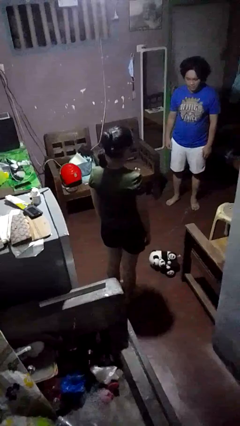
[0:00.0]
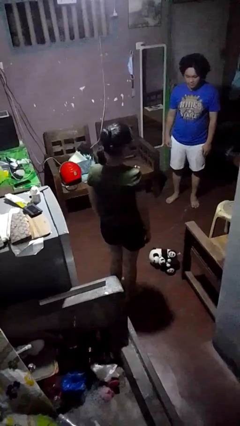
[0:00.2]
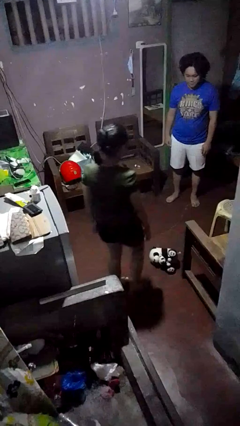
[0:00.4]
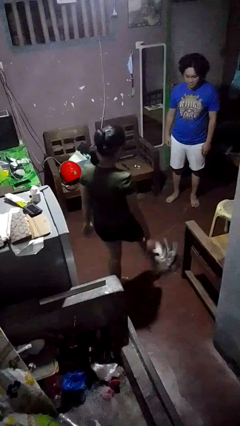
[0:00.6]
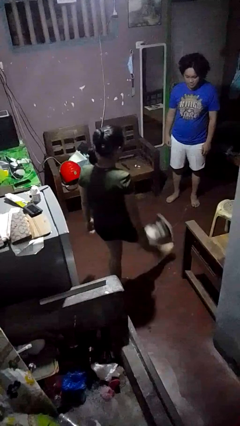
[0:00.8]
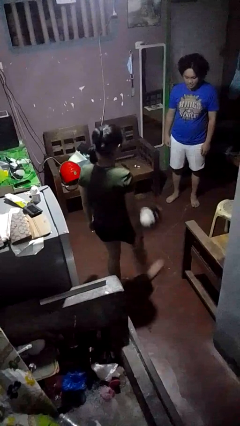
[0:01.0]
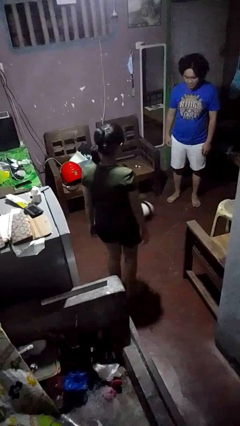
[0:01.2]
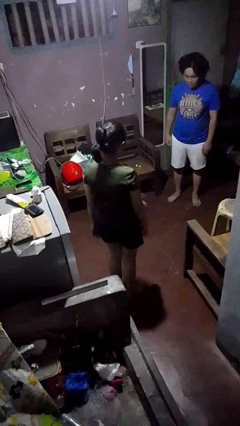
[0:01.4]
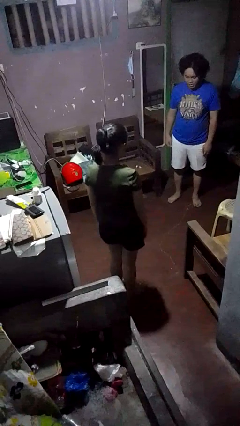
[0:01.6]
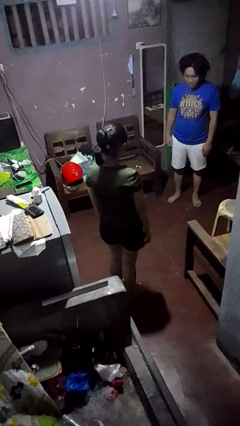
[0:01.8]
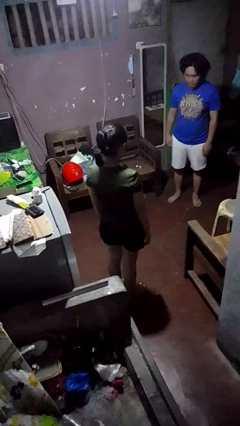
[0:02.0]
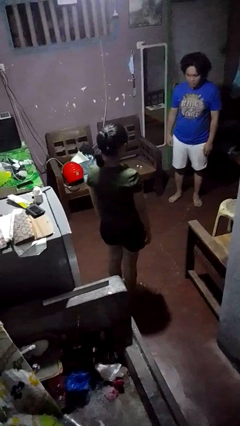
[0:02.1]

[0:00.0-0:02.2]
person kicks object to person

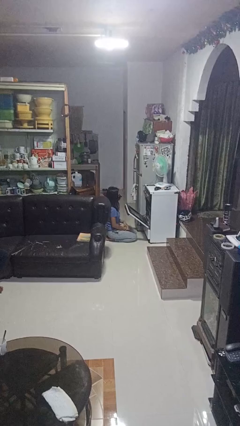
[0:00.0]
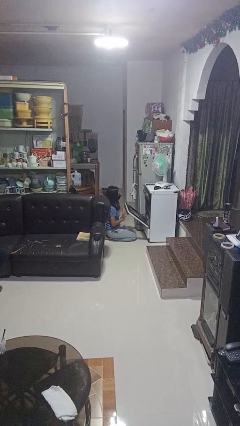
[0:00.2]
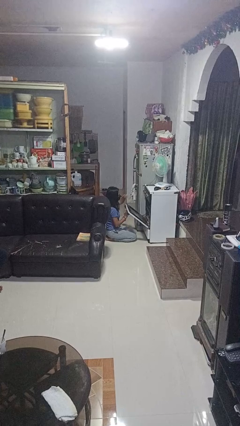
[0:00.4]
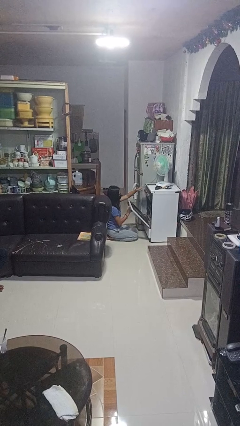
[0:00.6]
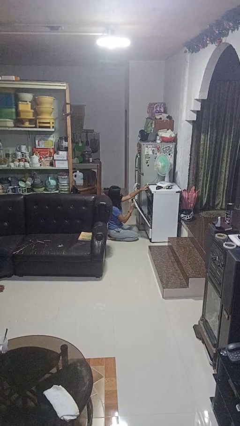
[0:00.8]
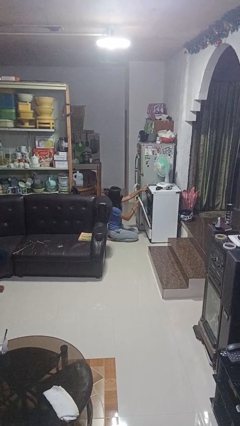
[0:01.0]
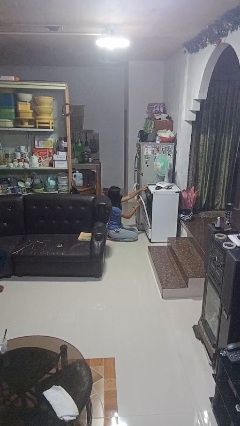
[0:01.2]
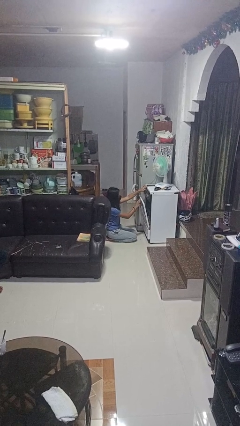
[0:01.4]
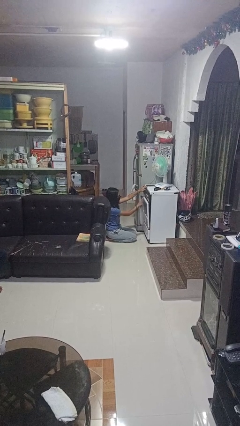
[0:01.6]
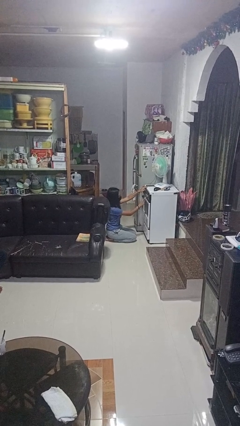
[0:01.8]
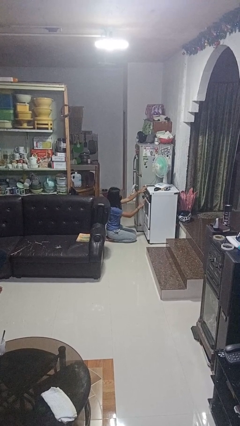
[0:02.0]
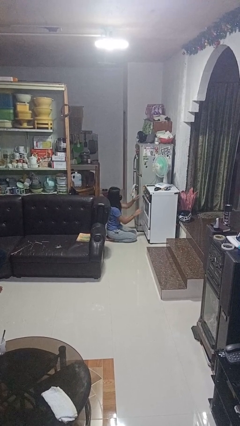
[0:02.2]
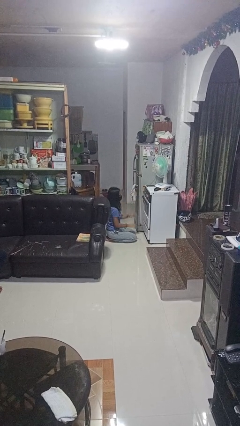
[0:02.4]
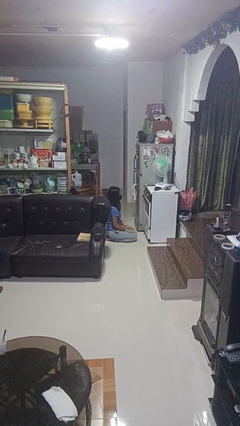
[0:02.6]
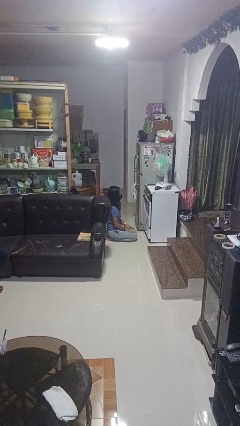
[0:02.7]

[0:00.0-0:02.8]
person closes oven door

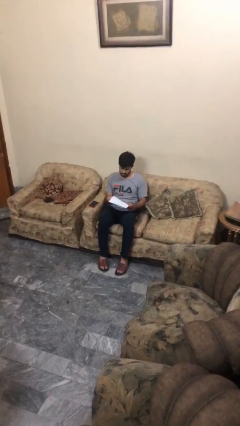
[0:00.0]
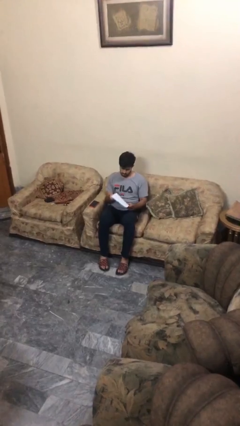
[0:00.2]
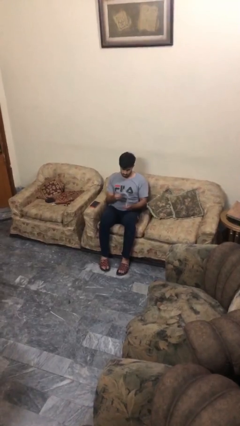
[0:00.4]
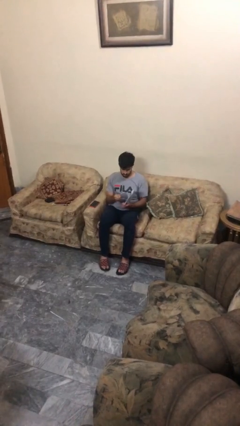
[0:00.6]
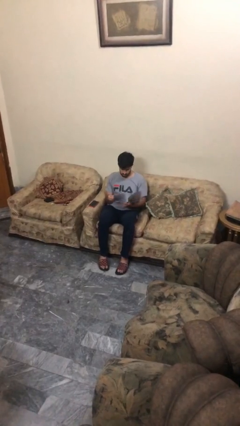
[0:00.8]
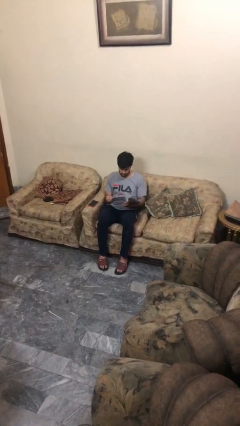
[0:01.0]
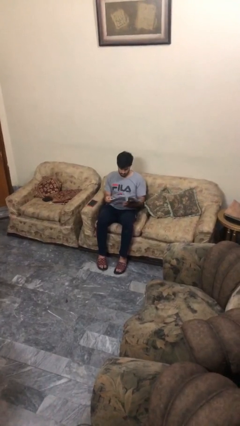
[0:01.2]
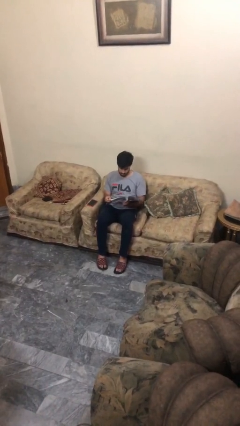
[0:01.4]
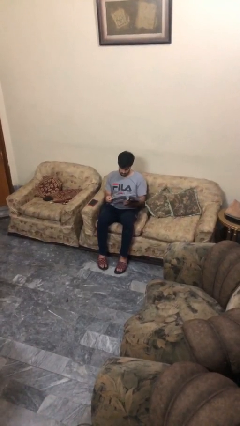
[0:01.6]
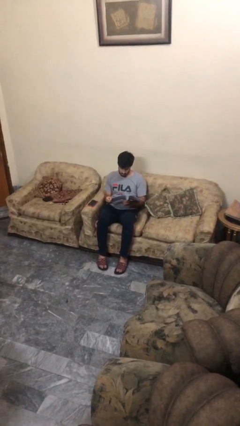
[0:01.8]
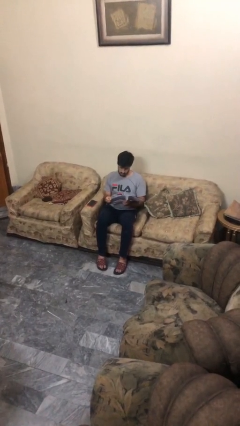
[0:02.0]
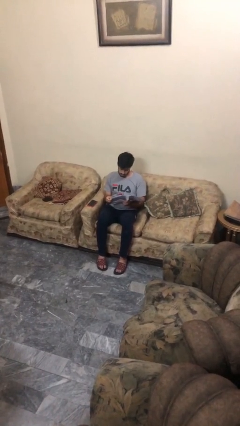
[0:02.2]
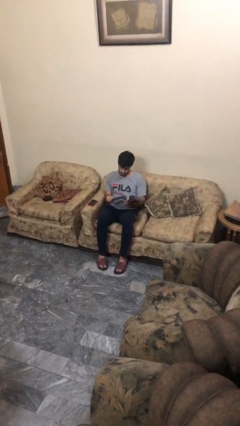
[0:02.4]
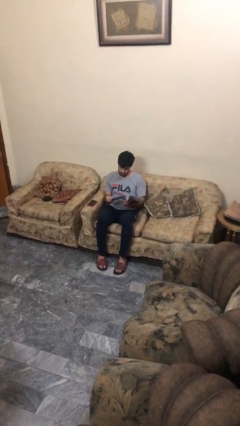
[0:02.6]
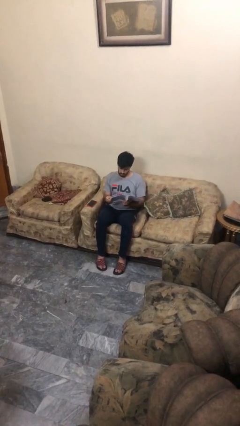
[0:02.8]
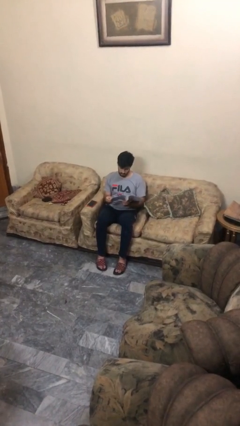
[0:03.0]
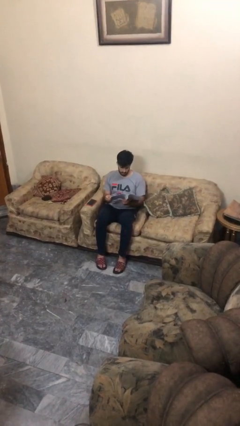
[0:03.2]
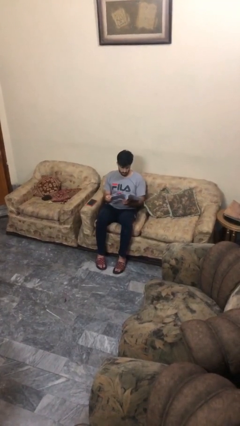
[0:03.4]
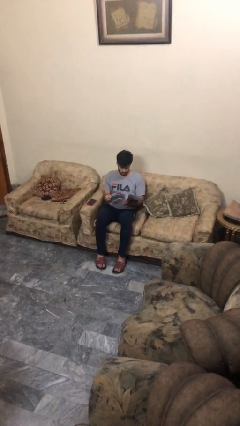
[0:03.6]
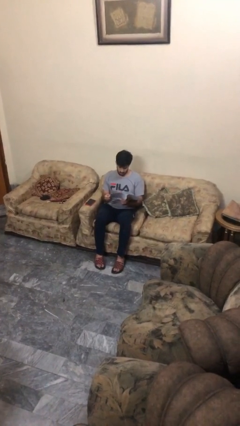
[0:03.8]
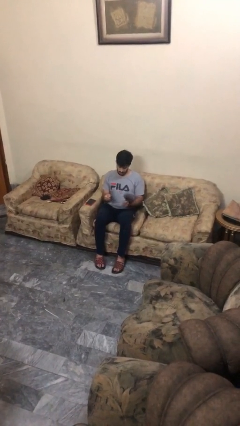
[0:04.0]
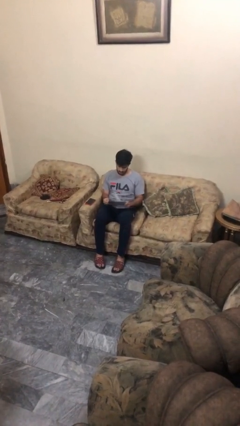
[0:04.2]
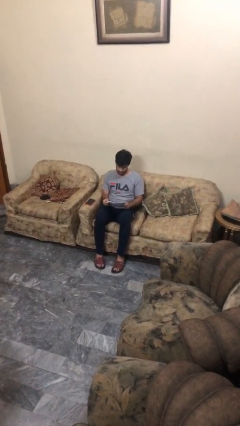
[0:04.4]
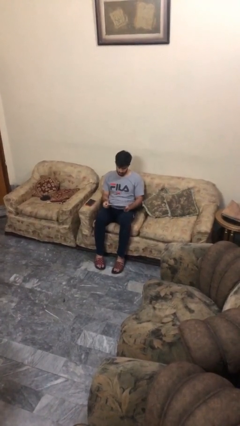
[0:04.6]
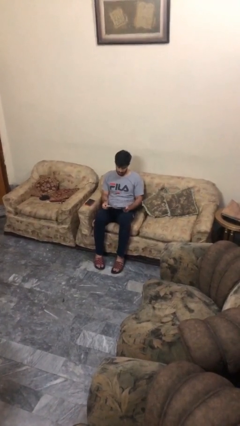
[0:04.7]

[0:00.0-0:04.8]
person reads magazine

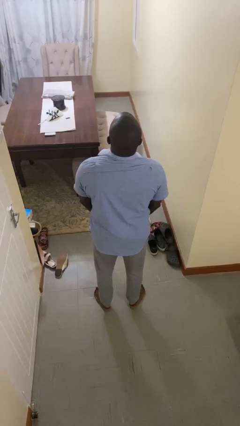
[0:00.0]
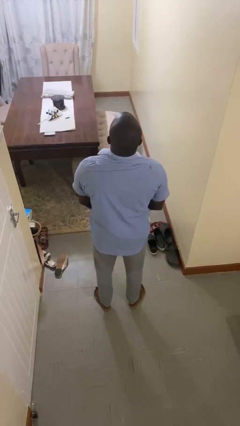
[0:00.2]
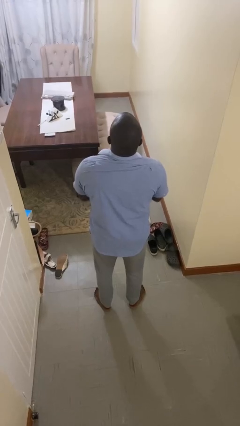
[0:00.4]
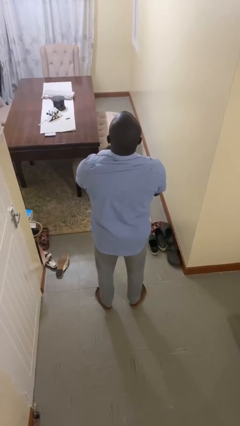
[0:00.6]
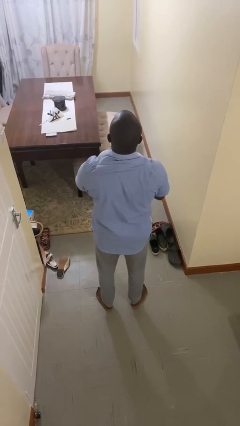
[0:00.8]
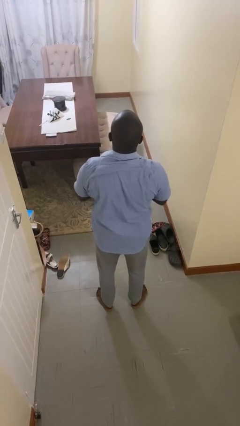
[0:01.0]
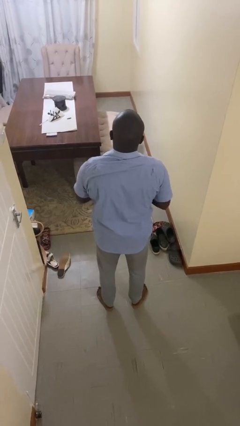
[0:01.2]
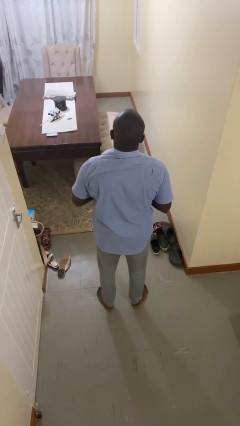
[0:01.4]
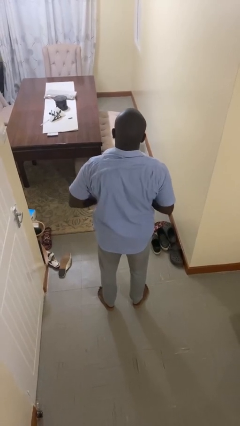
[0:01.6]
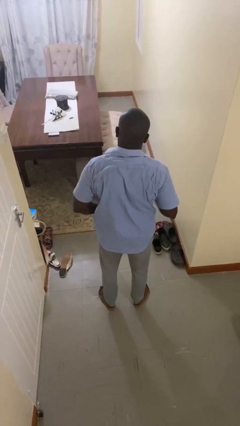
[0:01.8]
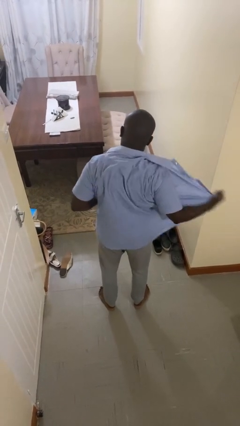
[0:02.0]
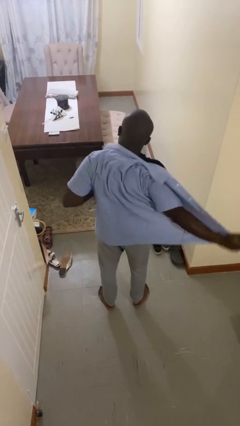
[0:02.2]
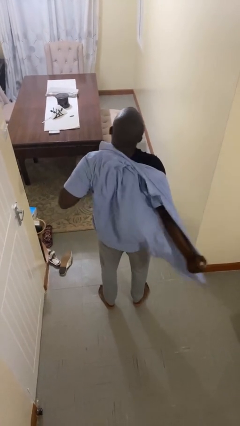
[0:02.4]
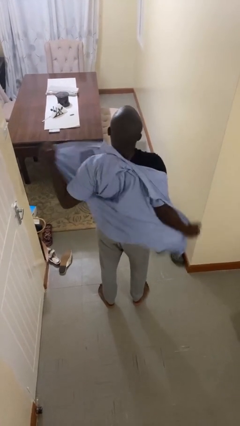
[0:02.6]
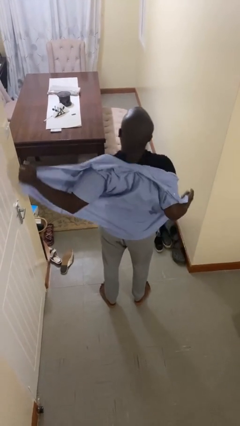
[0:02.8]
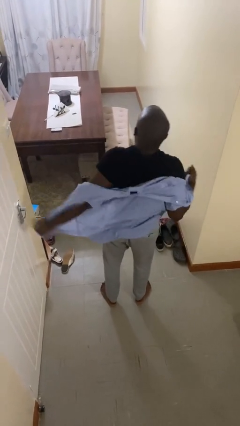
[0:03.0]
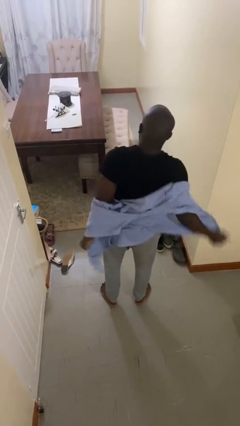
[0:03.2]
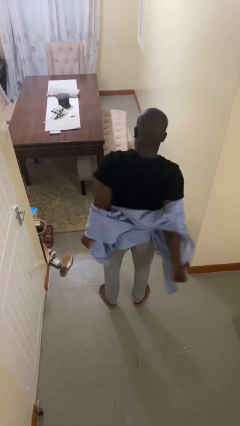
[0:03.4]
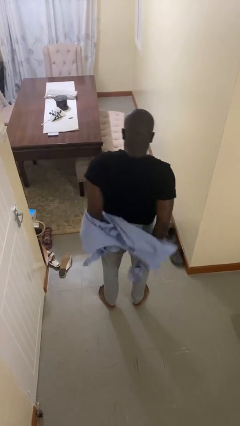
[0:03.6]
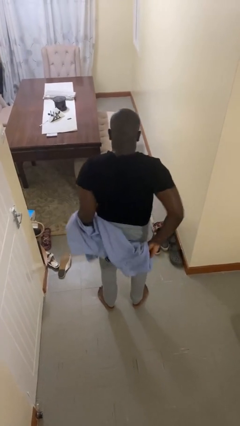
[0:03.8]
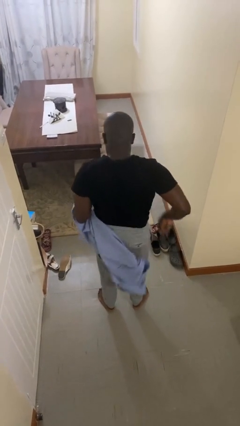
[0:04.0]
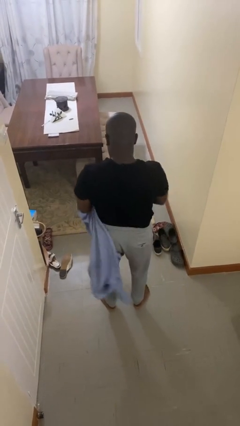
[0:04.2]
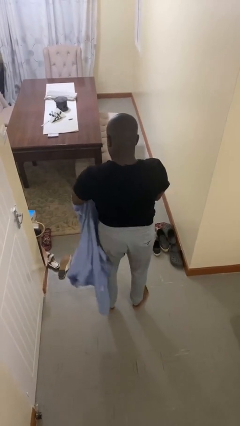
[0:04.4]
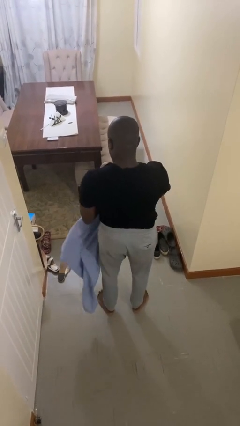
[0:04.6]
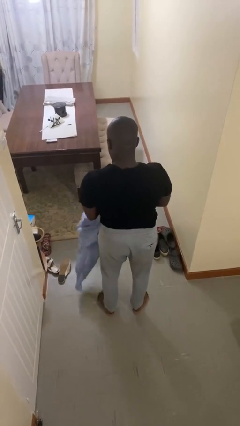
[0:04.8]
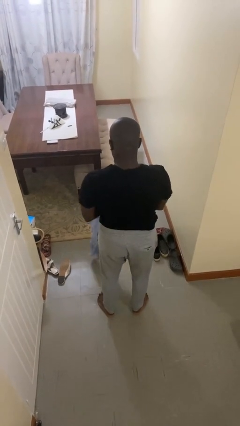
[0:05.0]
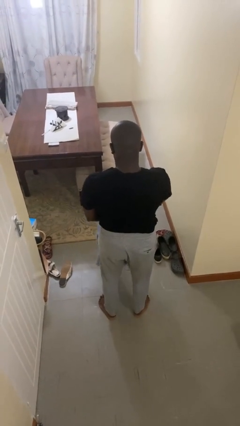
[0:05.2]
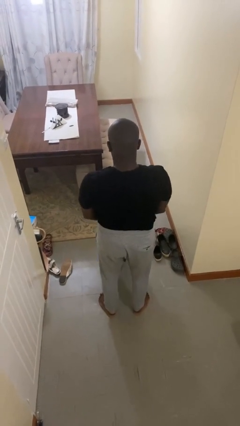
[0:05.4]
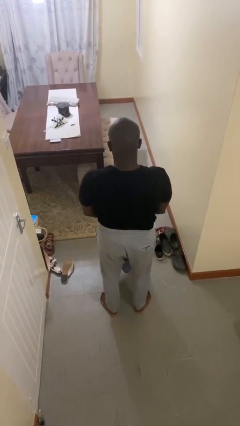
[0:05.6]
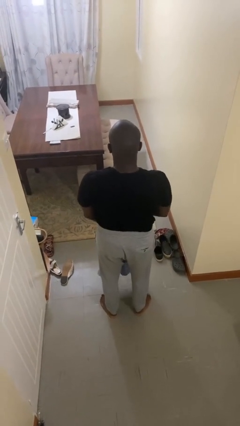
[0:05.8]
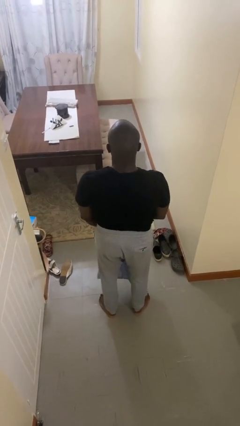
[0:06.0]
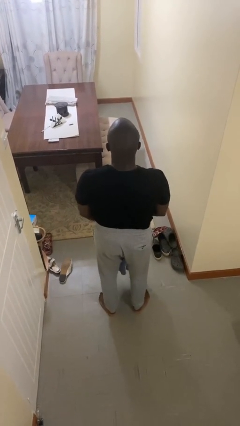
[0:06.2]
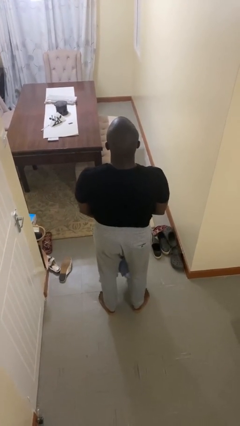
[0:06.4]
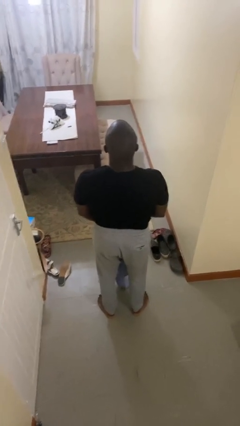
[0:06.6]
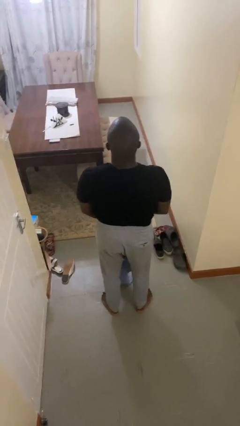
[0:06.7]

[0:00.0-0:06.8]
person takes off shirt

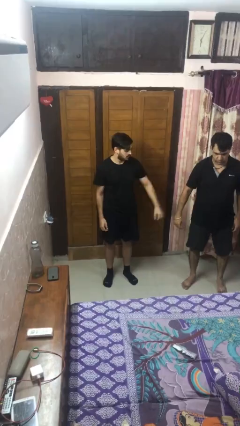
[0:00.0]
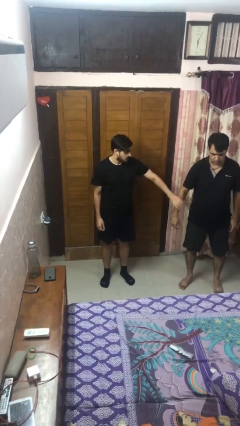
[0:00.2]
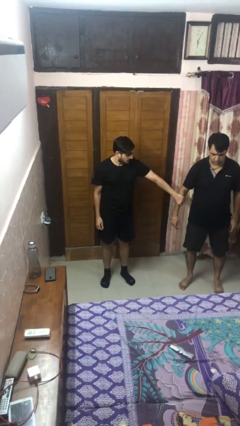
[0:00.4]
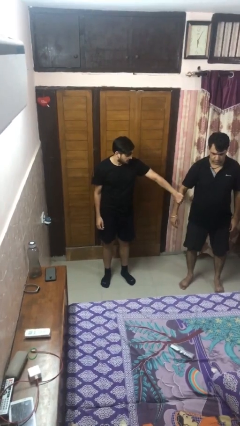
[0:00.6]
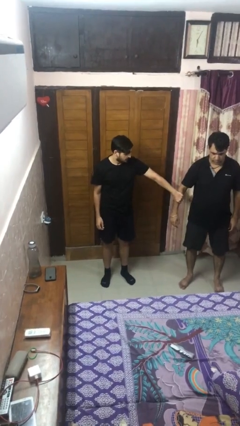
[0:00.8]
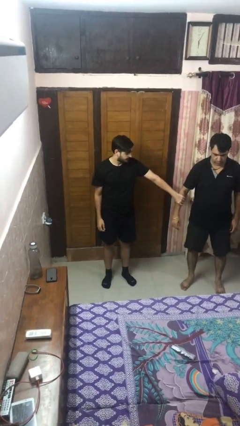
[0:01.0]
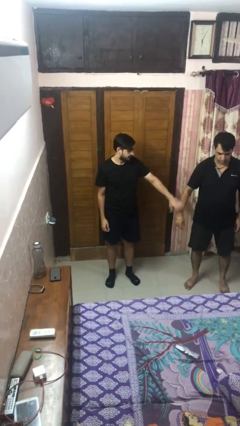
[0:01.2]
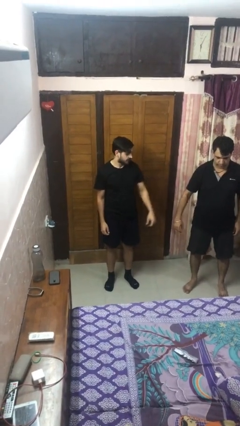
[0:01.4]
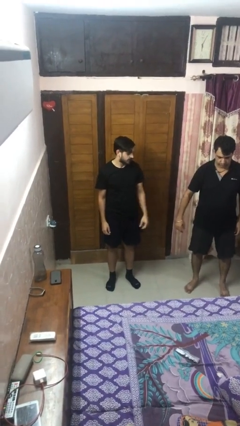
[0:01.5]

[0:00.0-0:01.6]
person grabs person by forearm
